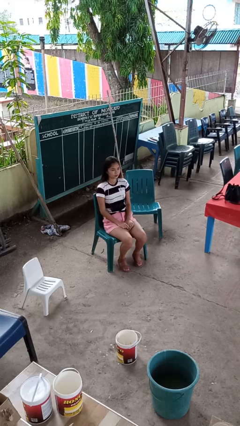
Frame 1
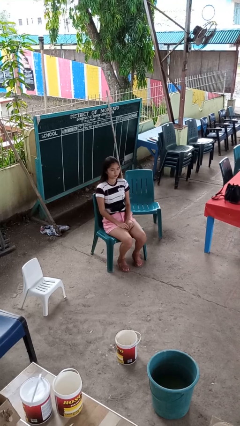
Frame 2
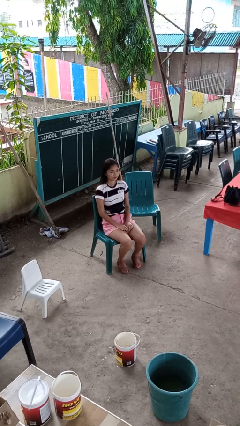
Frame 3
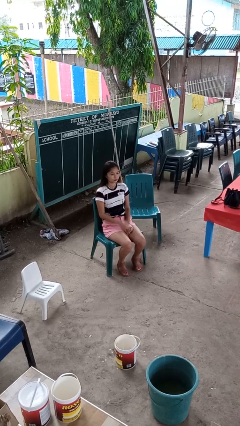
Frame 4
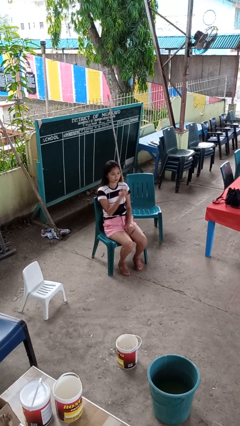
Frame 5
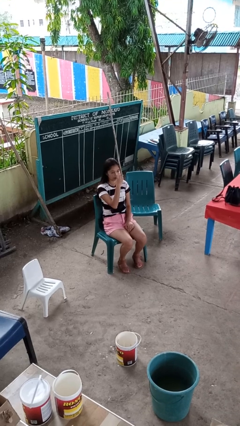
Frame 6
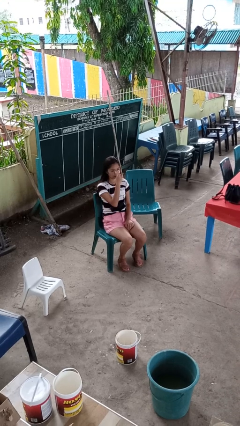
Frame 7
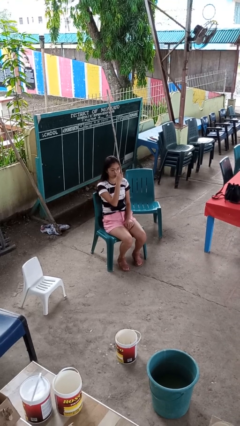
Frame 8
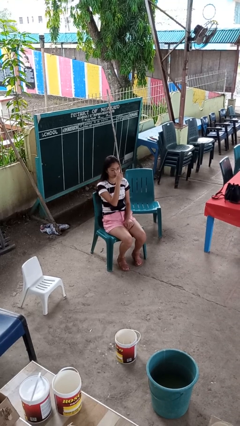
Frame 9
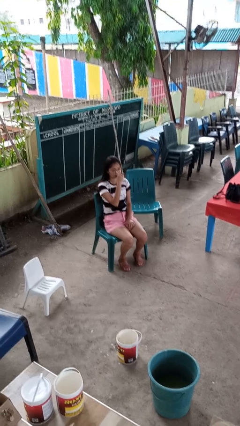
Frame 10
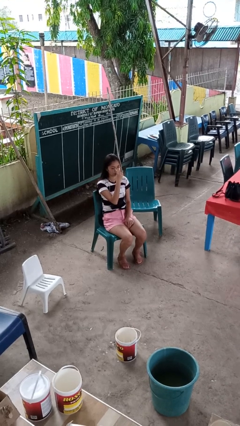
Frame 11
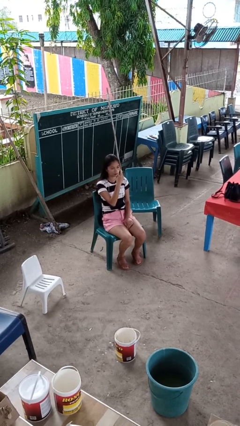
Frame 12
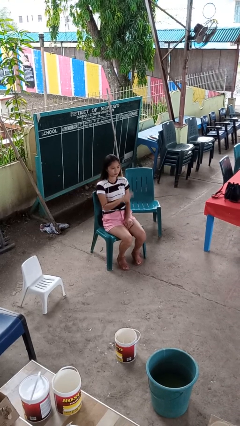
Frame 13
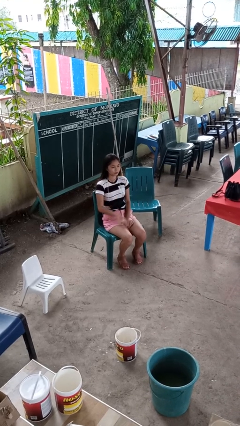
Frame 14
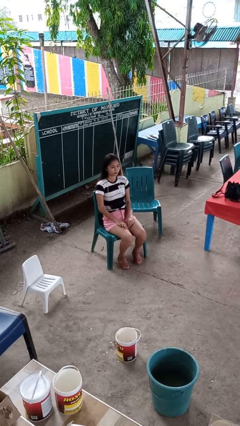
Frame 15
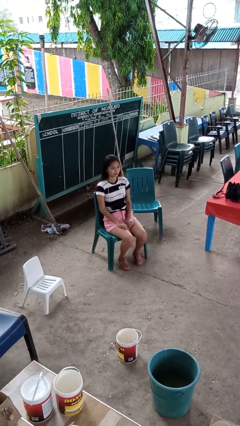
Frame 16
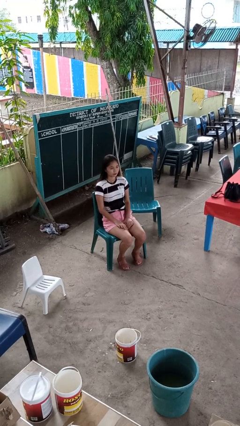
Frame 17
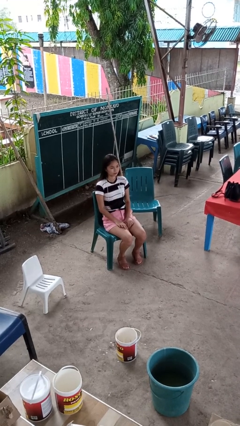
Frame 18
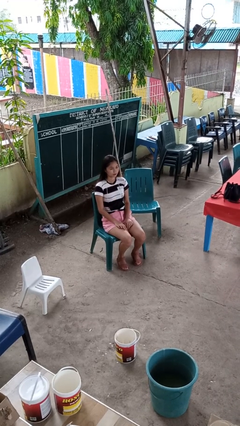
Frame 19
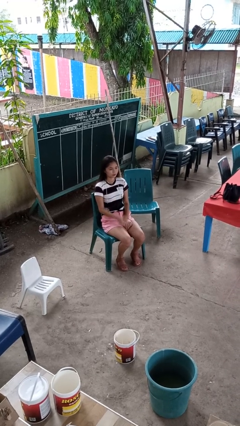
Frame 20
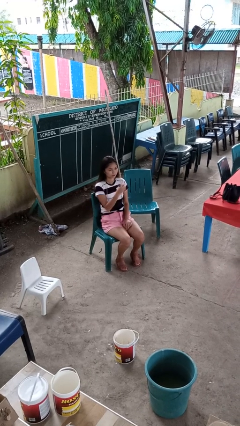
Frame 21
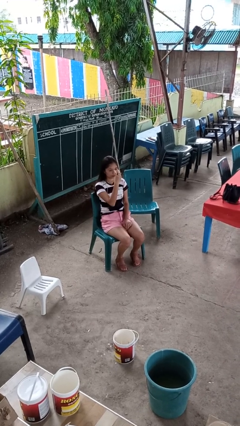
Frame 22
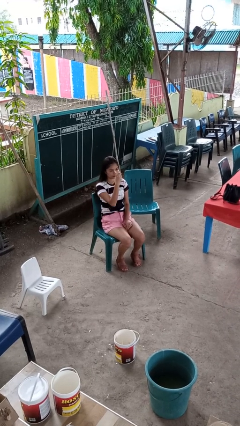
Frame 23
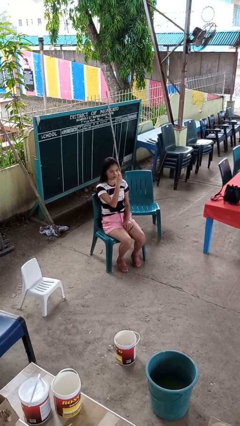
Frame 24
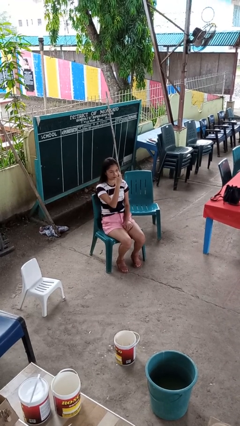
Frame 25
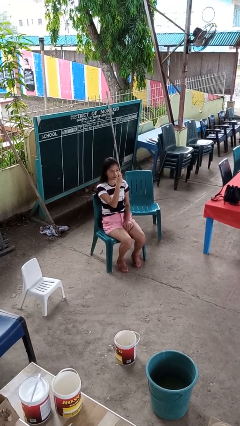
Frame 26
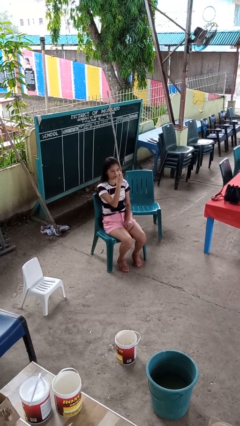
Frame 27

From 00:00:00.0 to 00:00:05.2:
person gestures watch closely

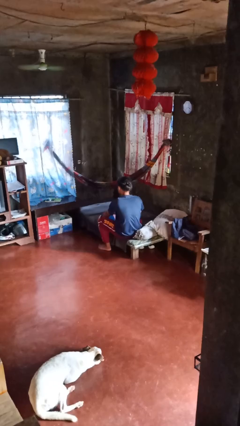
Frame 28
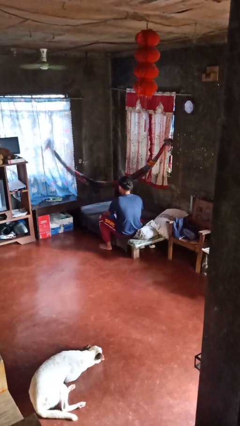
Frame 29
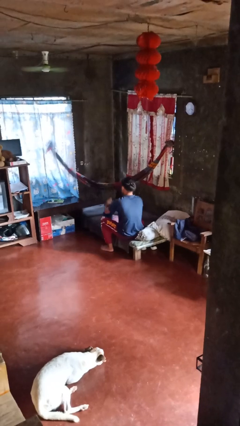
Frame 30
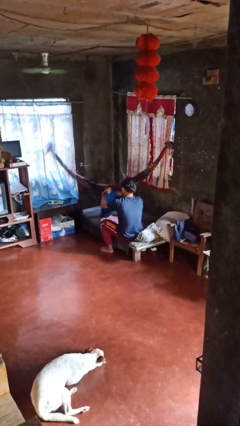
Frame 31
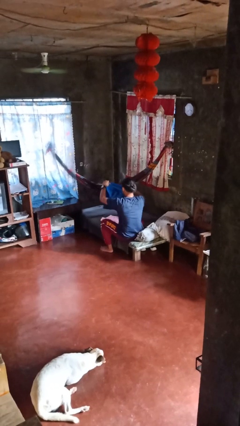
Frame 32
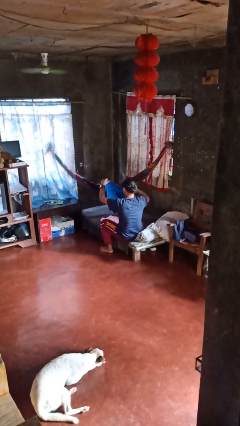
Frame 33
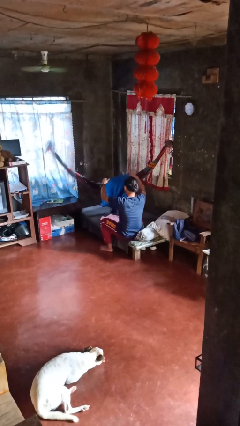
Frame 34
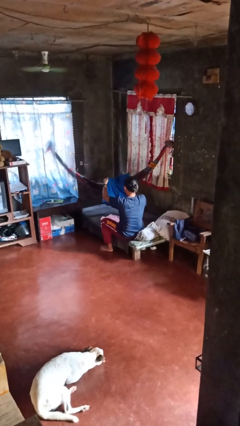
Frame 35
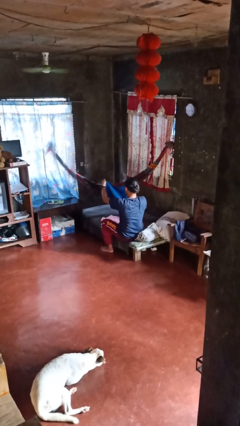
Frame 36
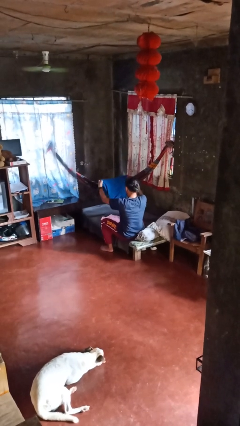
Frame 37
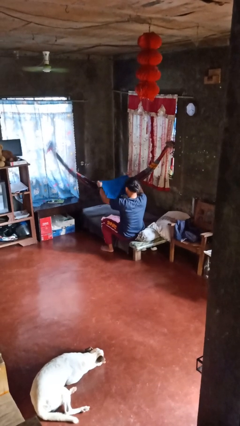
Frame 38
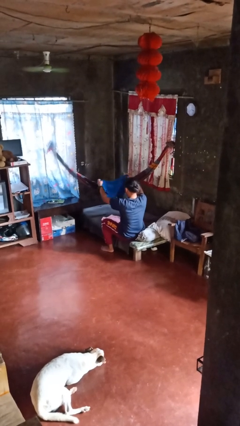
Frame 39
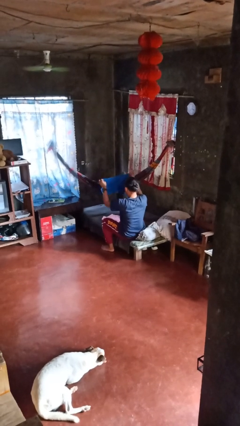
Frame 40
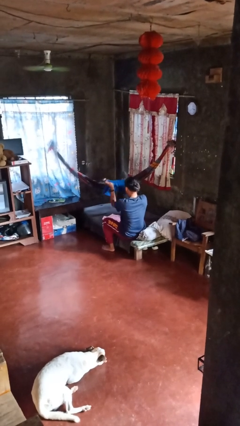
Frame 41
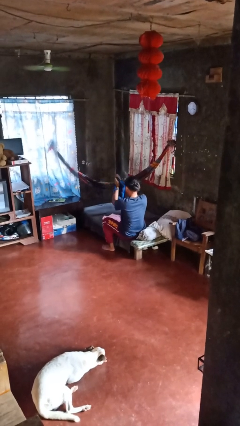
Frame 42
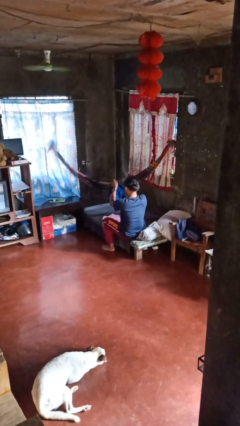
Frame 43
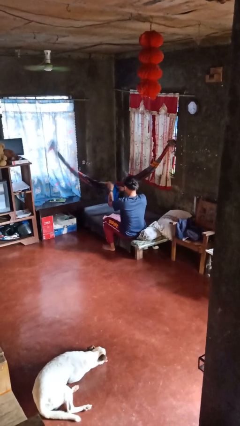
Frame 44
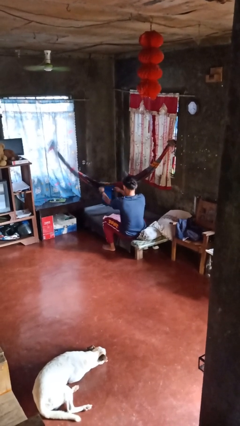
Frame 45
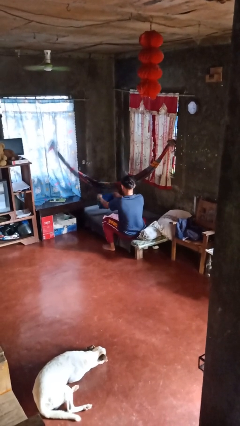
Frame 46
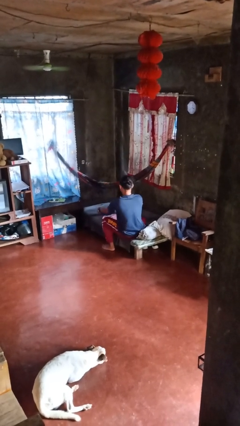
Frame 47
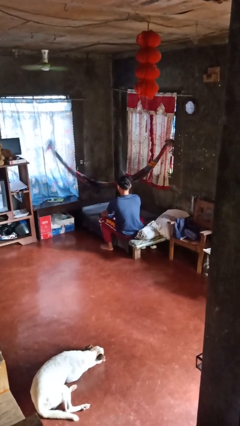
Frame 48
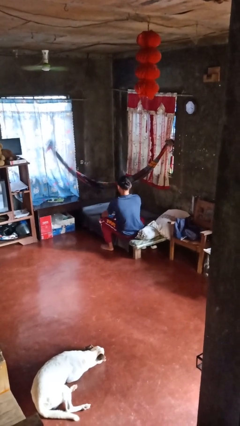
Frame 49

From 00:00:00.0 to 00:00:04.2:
person folds shirt

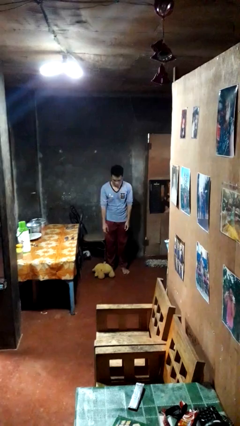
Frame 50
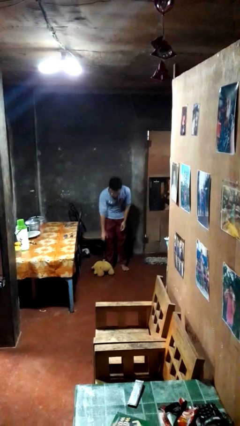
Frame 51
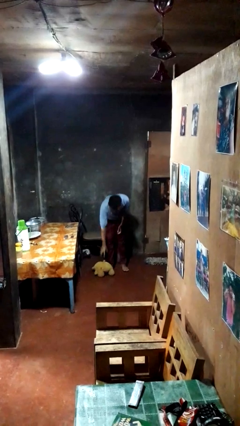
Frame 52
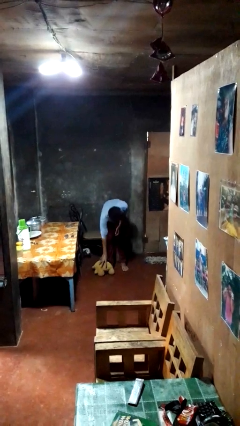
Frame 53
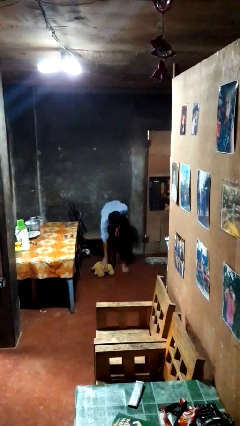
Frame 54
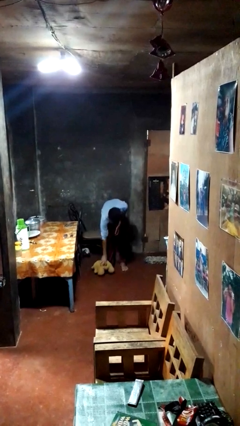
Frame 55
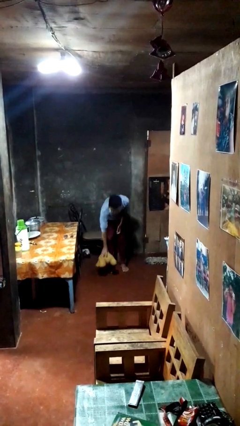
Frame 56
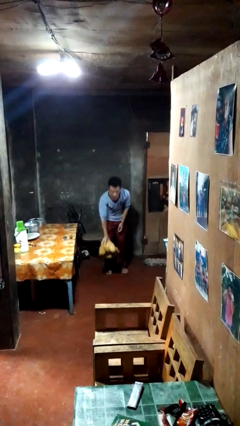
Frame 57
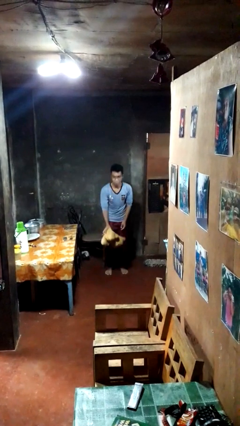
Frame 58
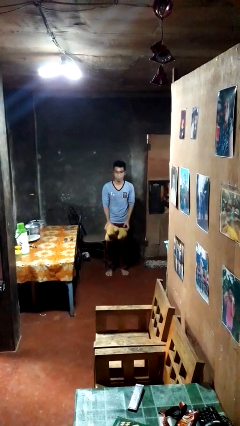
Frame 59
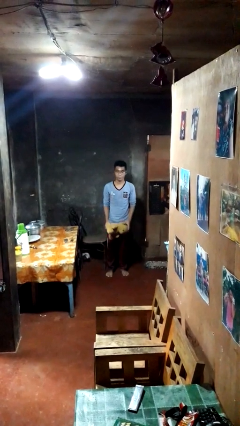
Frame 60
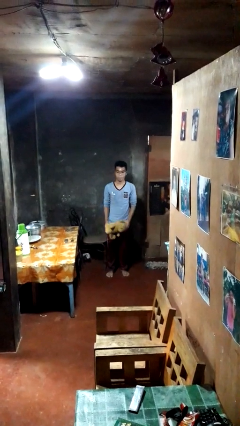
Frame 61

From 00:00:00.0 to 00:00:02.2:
person picks up object from floor

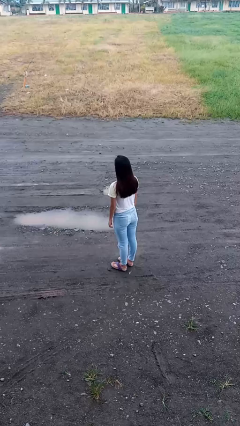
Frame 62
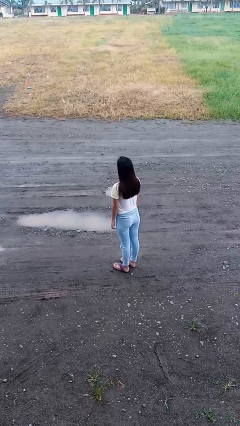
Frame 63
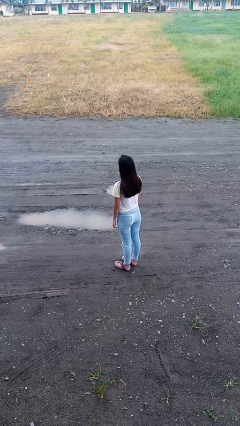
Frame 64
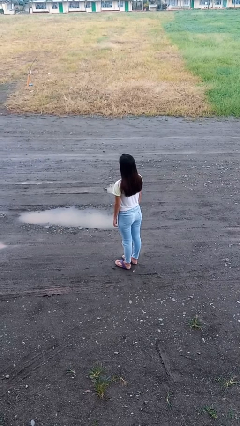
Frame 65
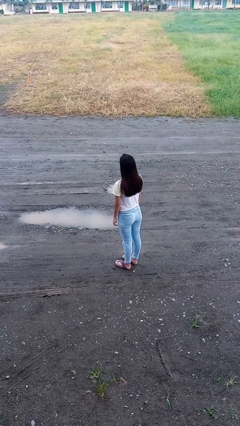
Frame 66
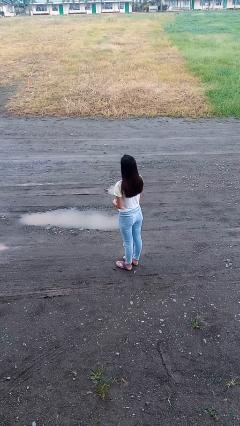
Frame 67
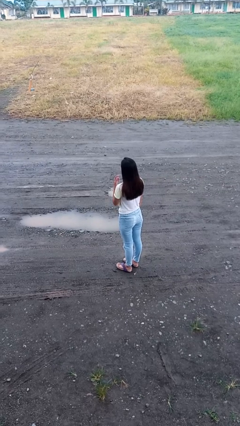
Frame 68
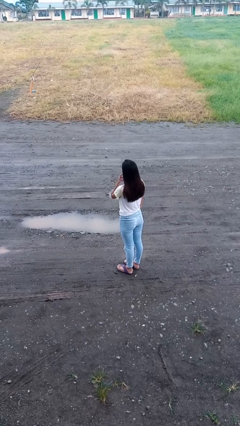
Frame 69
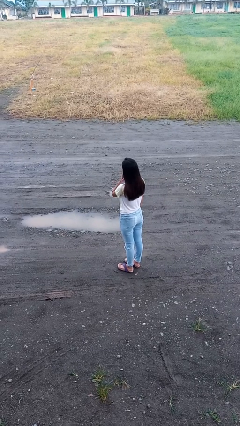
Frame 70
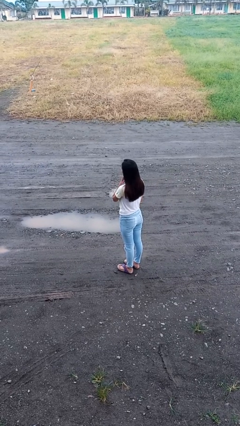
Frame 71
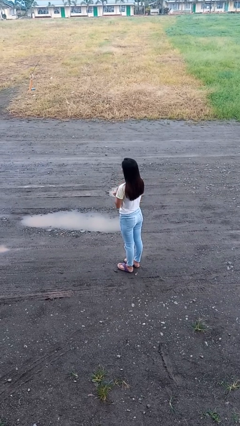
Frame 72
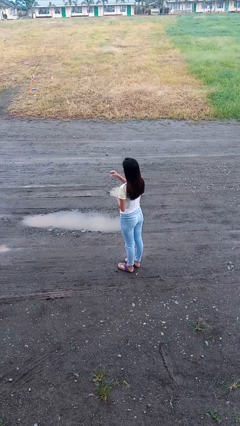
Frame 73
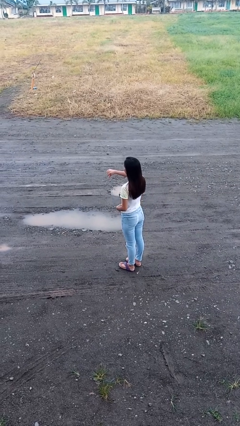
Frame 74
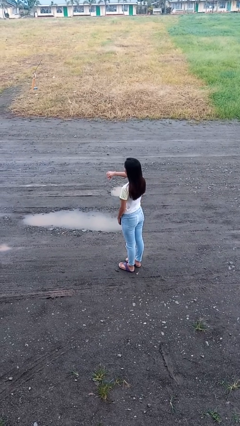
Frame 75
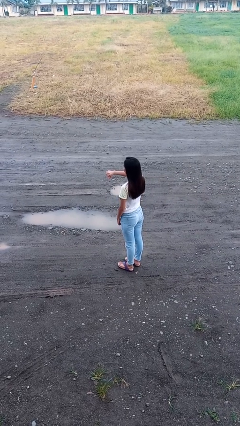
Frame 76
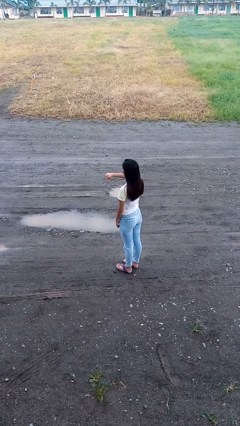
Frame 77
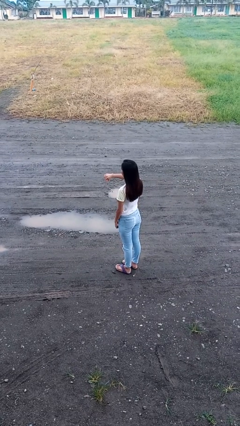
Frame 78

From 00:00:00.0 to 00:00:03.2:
person gestures thumbs down

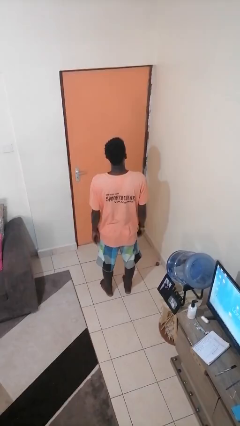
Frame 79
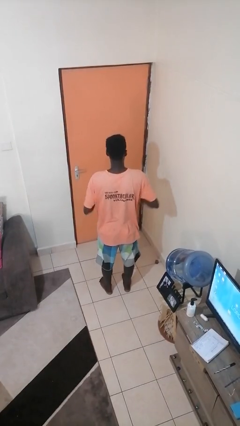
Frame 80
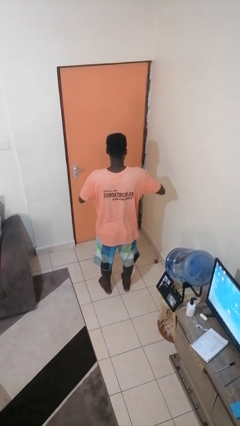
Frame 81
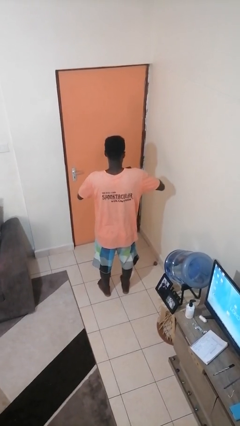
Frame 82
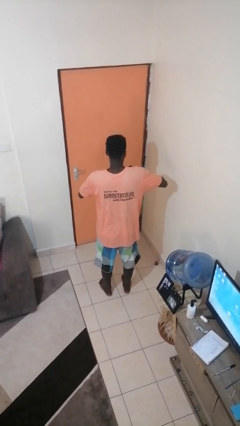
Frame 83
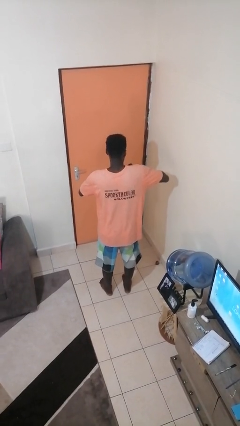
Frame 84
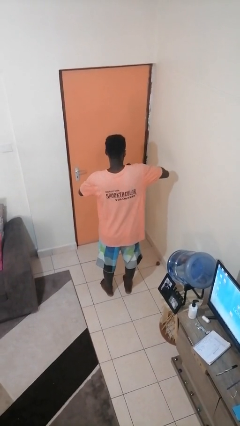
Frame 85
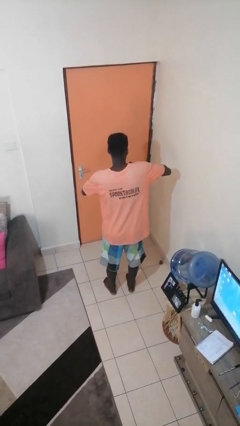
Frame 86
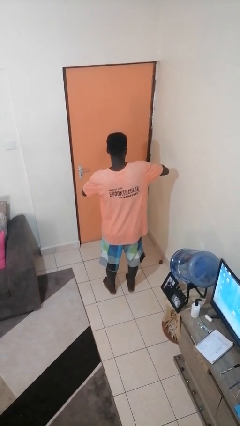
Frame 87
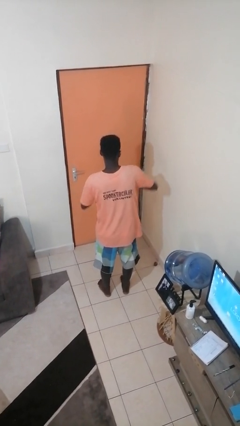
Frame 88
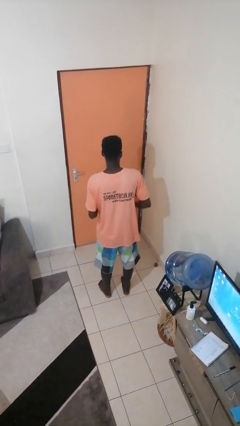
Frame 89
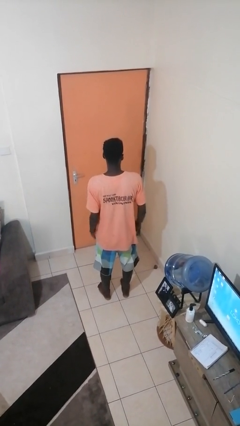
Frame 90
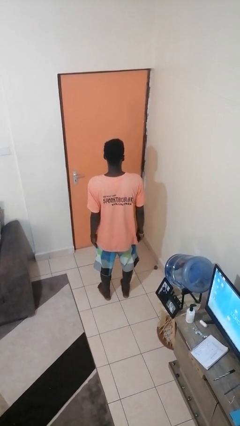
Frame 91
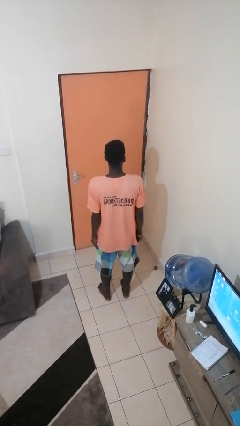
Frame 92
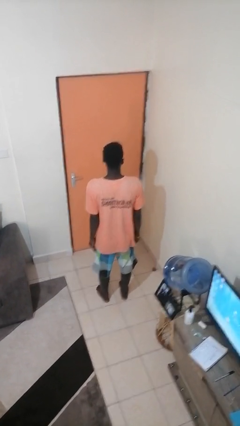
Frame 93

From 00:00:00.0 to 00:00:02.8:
person puts on ring
